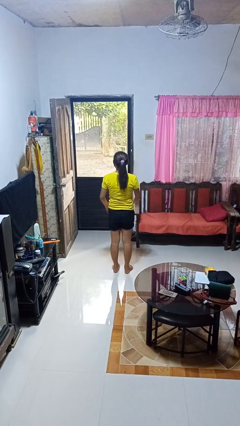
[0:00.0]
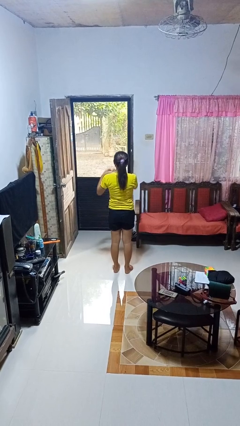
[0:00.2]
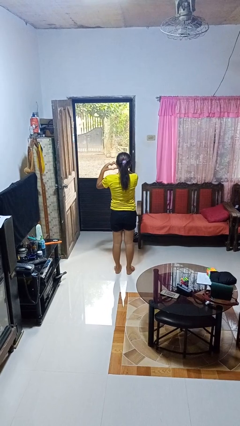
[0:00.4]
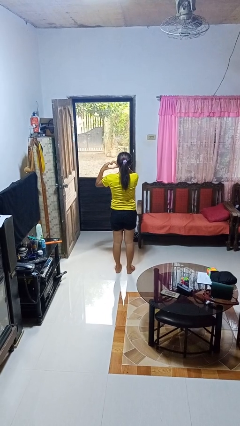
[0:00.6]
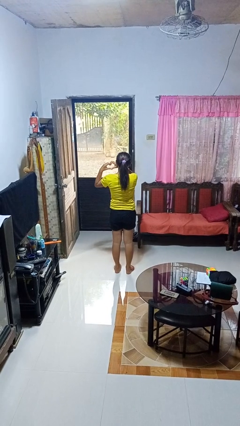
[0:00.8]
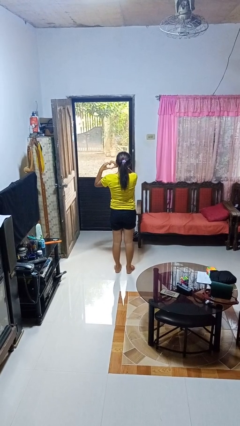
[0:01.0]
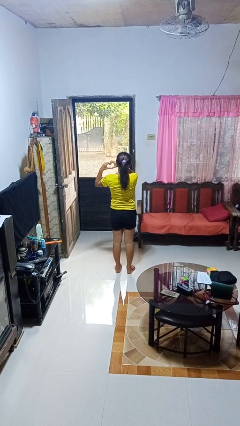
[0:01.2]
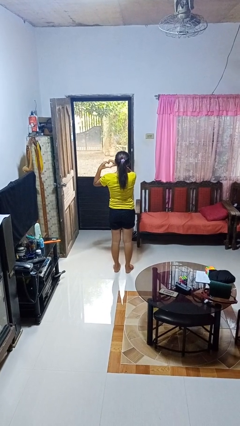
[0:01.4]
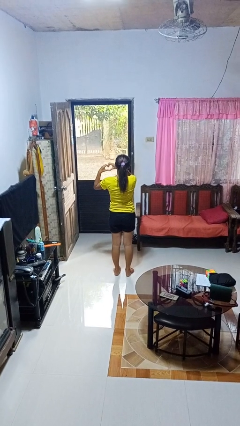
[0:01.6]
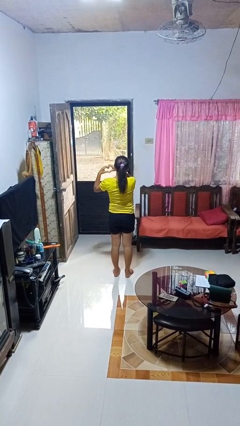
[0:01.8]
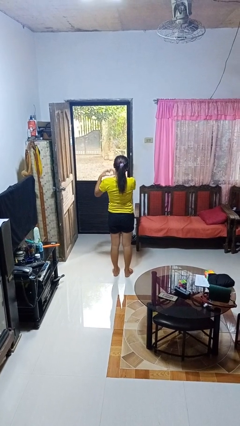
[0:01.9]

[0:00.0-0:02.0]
person gestures heart

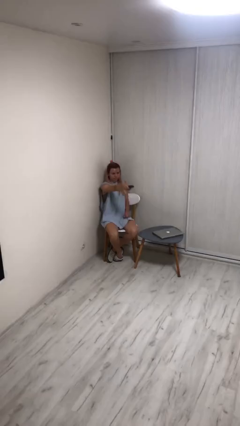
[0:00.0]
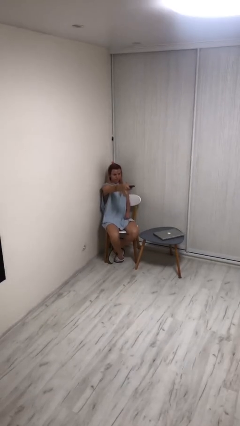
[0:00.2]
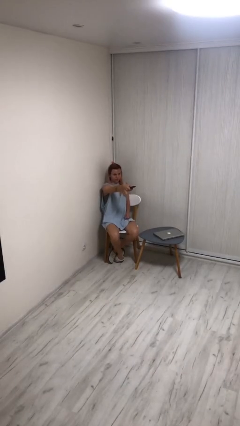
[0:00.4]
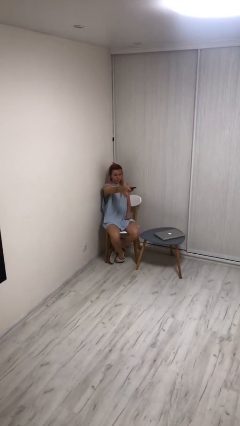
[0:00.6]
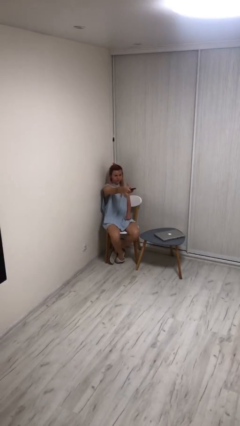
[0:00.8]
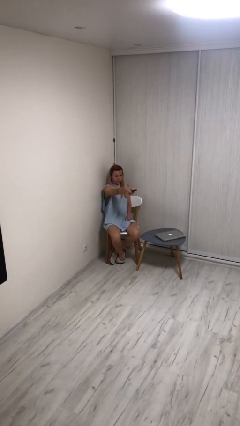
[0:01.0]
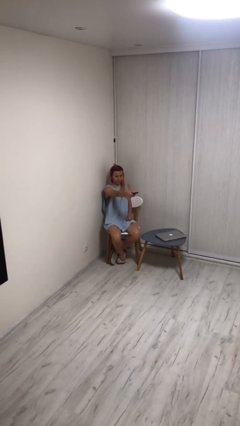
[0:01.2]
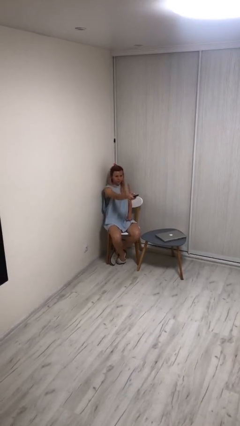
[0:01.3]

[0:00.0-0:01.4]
person uses television remote

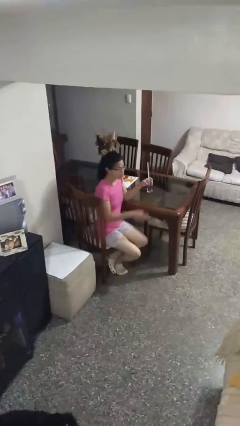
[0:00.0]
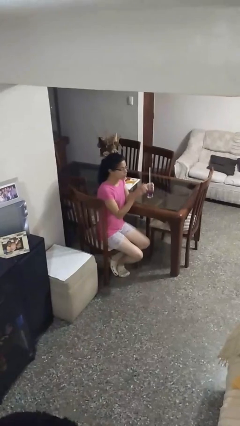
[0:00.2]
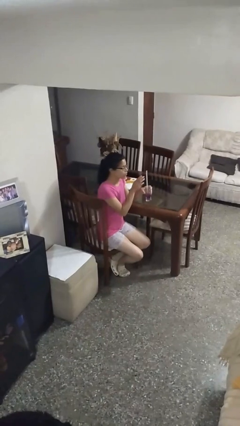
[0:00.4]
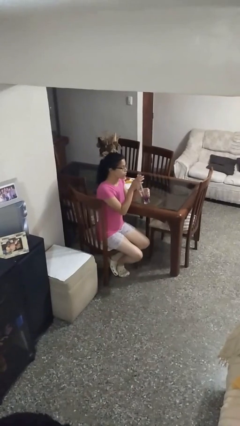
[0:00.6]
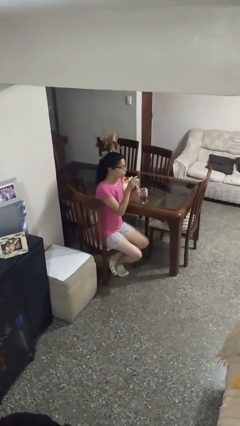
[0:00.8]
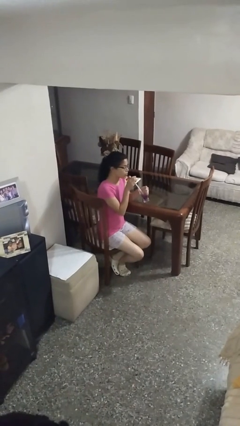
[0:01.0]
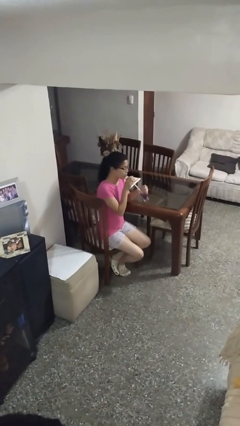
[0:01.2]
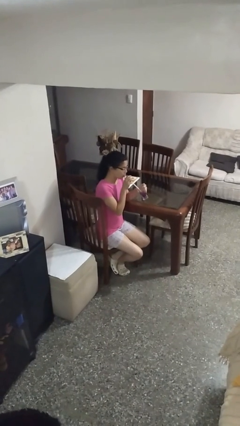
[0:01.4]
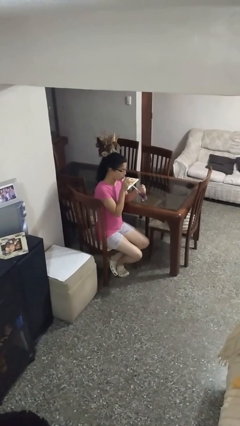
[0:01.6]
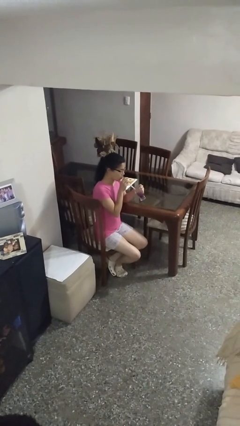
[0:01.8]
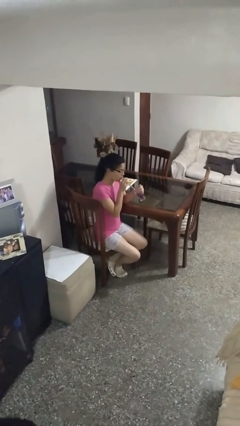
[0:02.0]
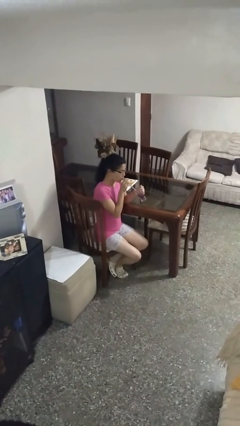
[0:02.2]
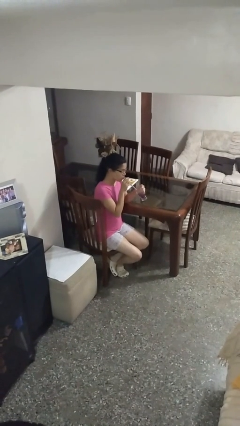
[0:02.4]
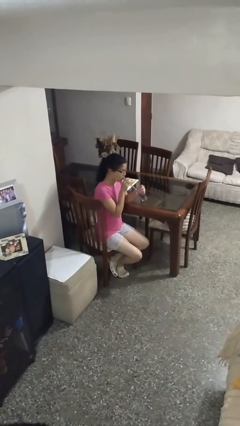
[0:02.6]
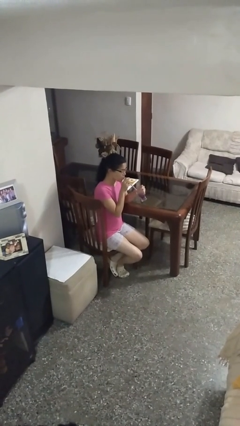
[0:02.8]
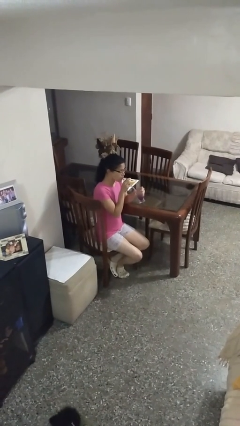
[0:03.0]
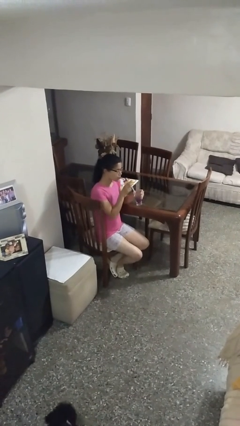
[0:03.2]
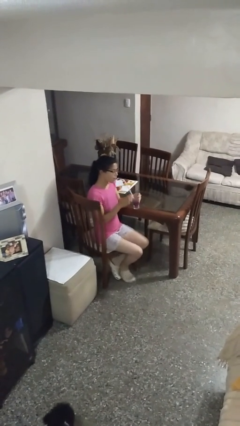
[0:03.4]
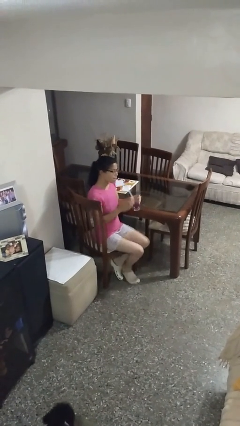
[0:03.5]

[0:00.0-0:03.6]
person drinks from straw

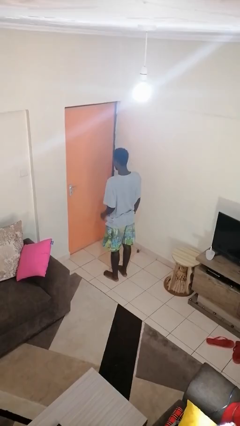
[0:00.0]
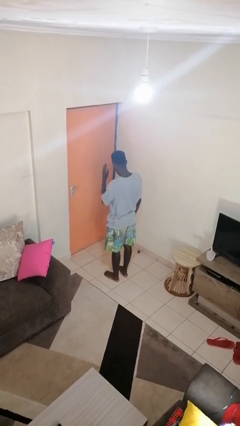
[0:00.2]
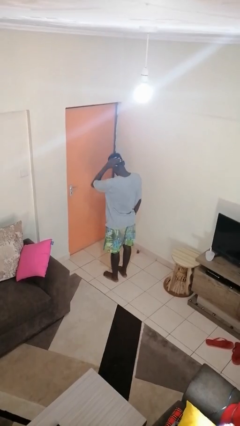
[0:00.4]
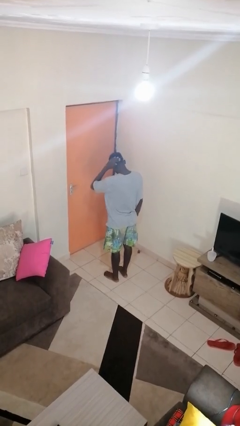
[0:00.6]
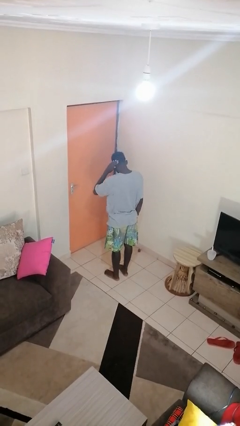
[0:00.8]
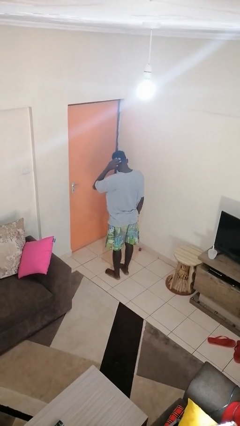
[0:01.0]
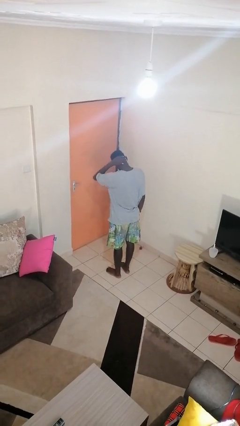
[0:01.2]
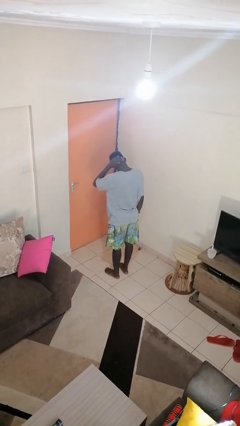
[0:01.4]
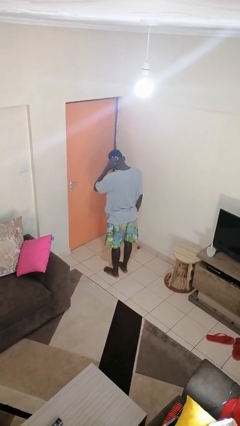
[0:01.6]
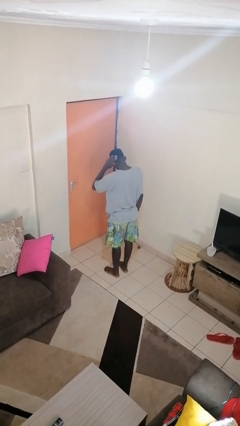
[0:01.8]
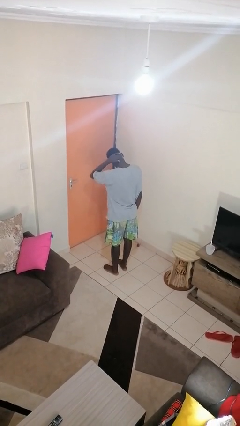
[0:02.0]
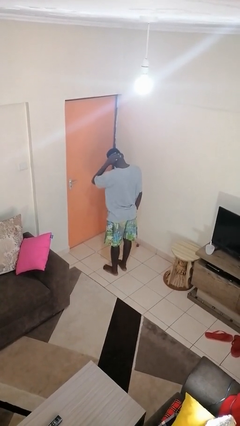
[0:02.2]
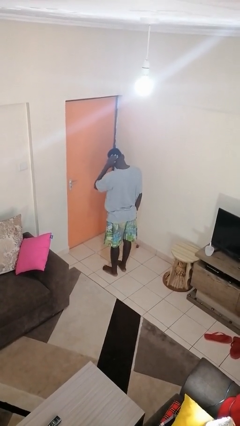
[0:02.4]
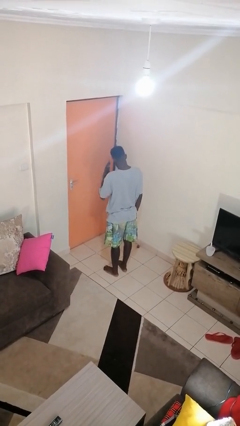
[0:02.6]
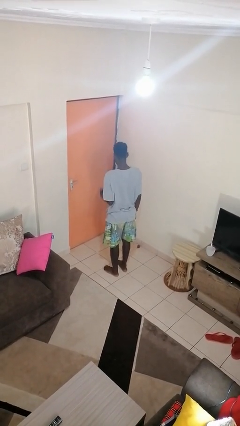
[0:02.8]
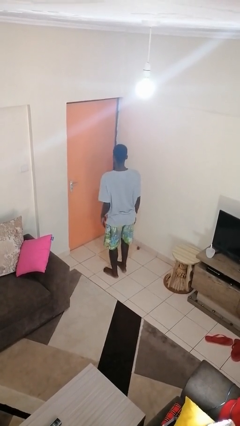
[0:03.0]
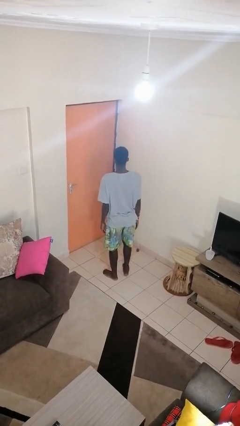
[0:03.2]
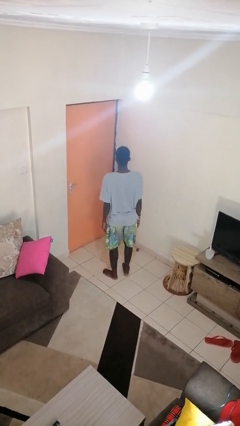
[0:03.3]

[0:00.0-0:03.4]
person strokes hair

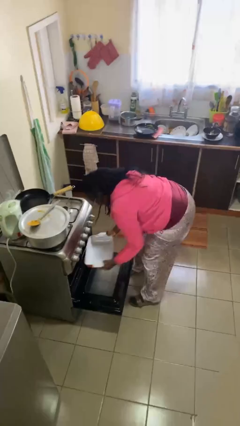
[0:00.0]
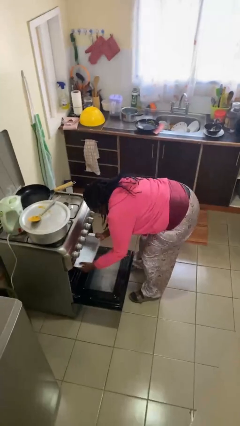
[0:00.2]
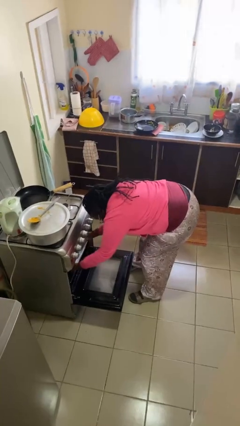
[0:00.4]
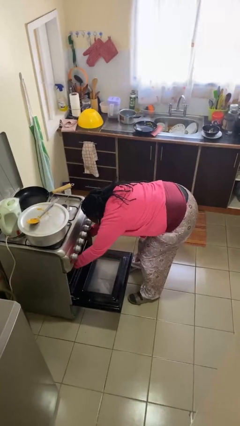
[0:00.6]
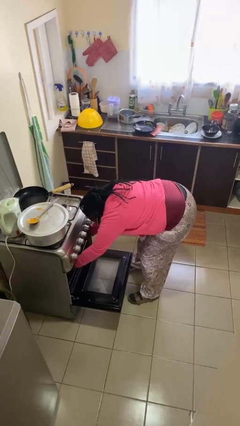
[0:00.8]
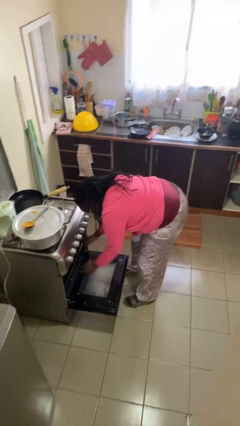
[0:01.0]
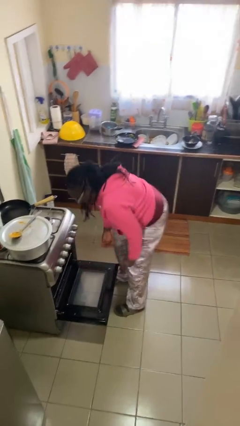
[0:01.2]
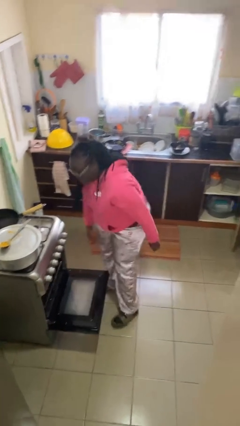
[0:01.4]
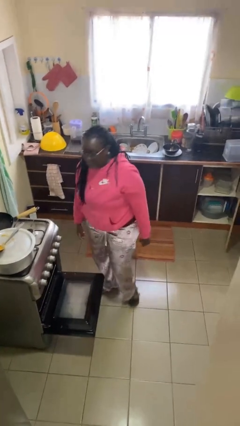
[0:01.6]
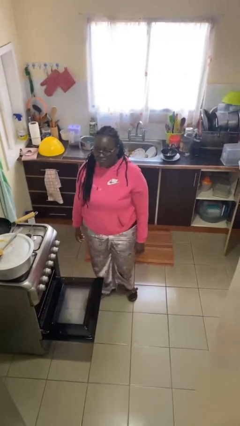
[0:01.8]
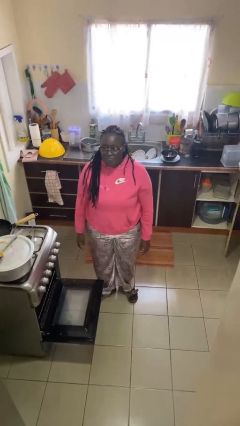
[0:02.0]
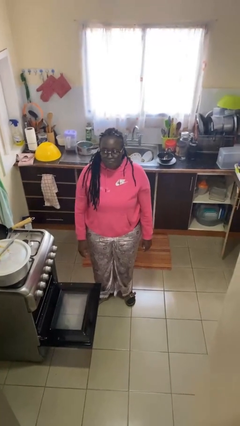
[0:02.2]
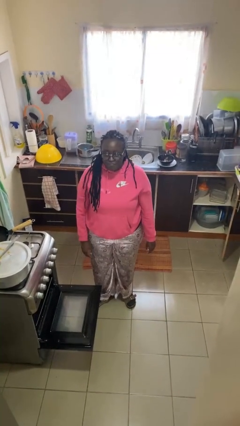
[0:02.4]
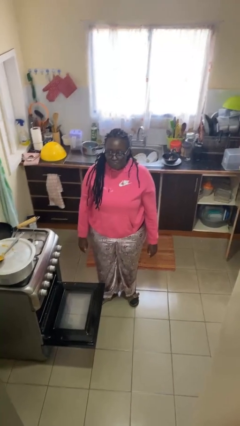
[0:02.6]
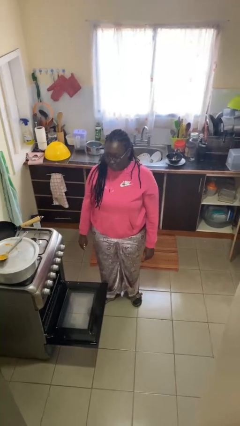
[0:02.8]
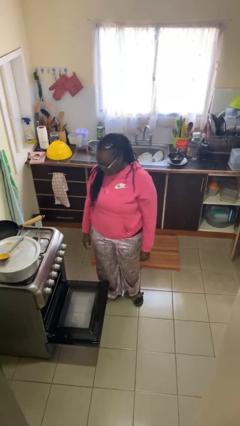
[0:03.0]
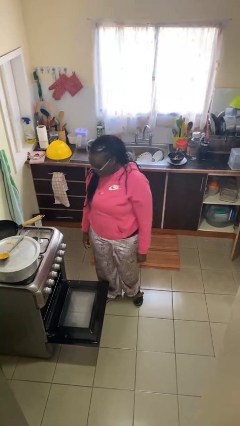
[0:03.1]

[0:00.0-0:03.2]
person puts object into oven

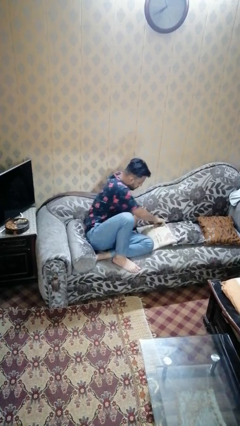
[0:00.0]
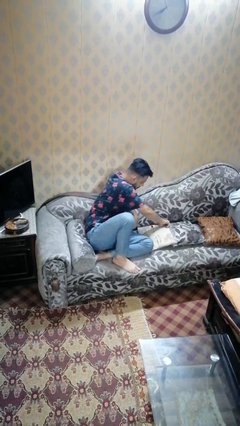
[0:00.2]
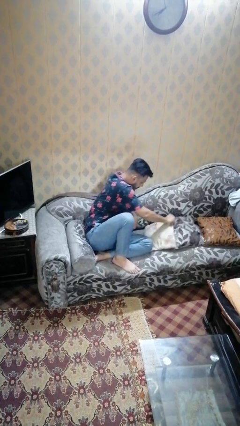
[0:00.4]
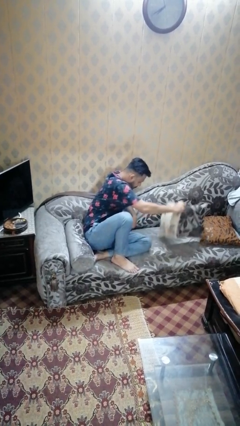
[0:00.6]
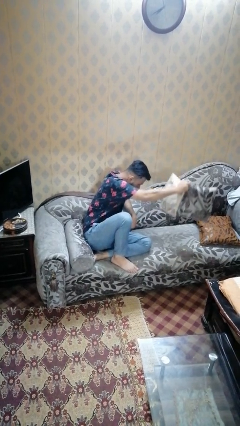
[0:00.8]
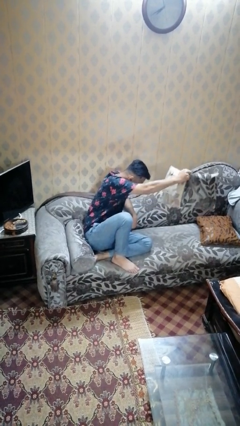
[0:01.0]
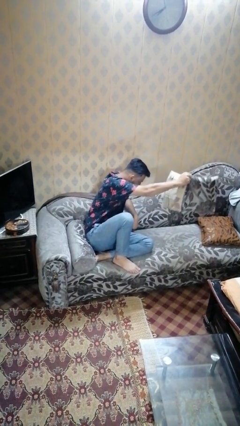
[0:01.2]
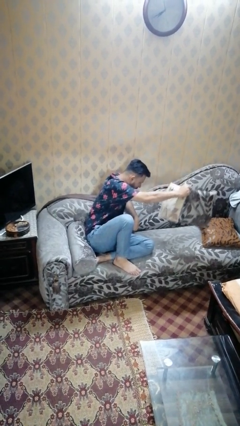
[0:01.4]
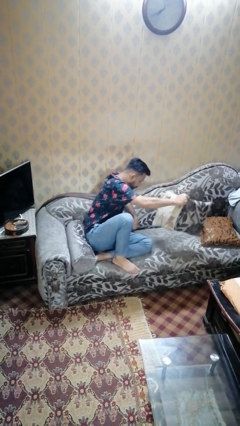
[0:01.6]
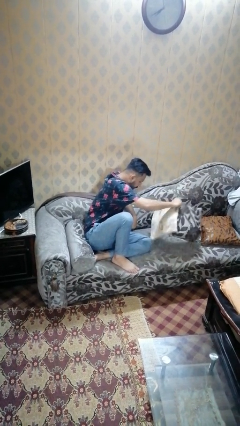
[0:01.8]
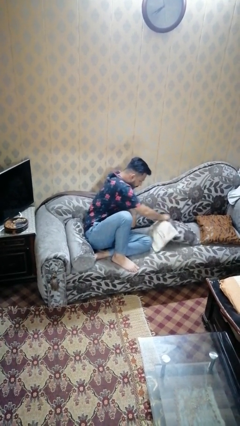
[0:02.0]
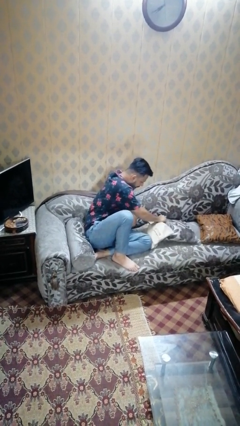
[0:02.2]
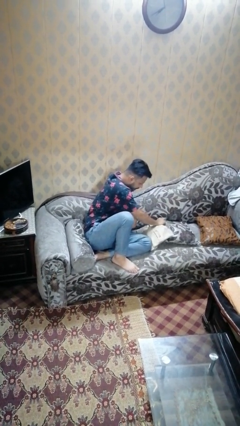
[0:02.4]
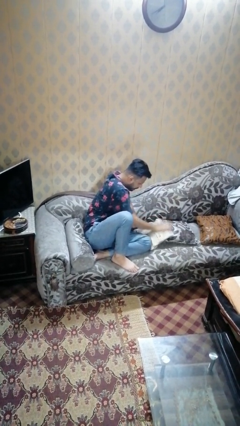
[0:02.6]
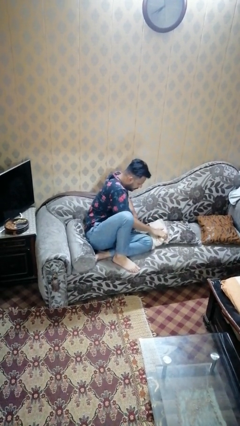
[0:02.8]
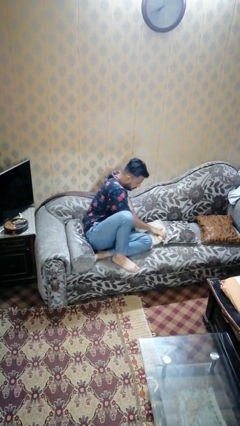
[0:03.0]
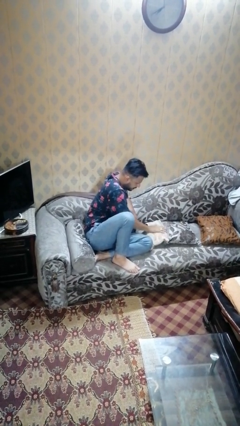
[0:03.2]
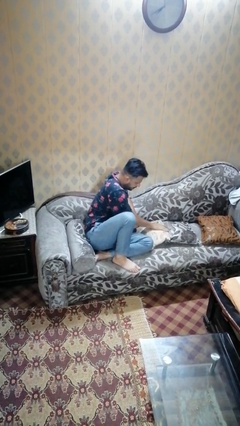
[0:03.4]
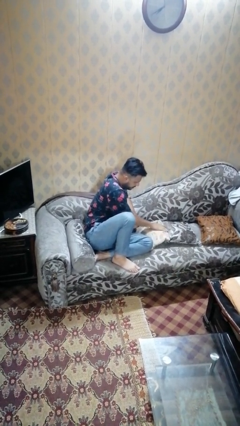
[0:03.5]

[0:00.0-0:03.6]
person searches in couch

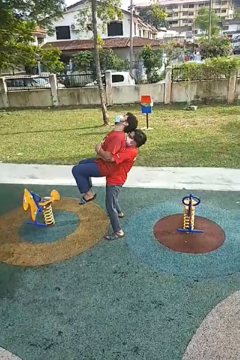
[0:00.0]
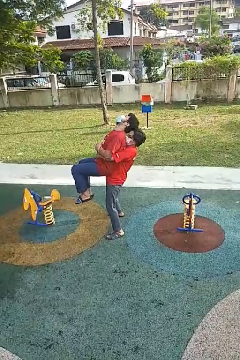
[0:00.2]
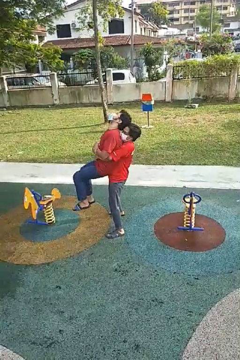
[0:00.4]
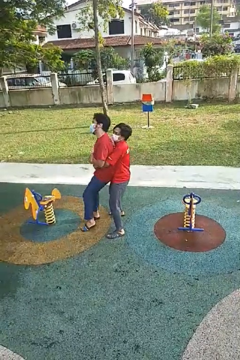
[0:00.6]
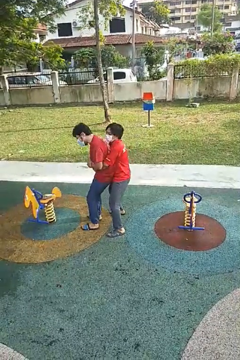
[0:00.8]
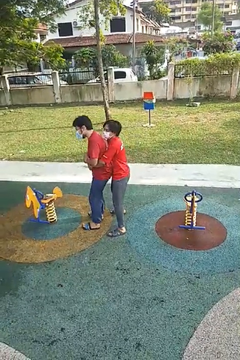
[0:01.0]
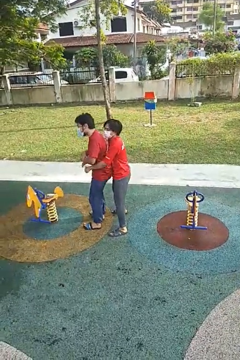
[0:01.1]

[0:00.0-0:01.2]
person puts down person
